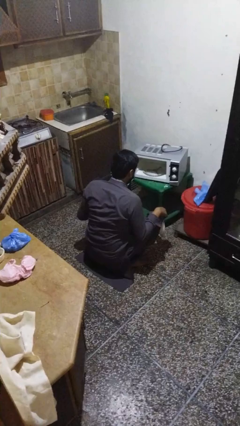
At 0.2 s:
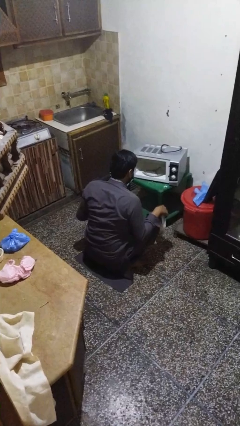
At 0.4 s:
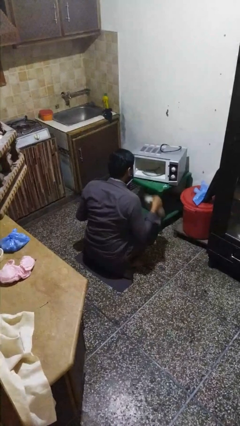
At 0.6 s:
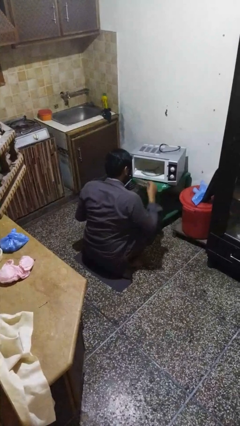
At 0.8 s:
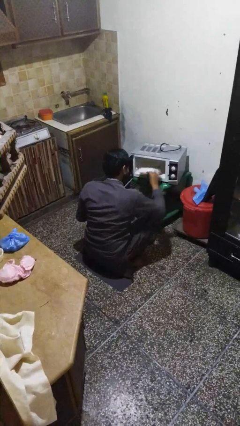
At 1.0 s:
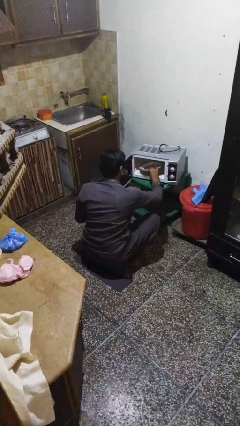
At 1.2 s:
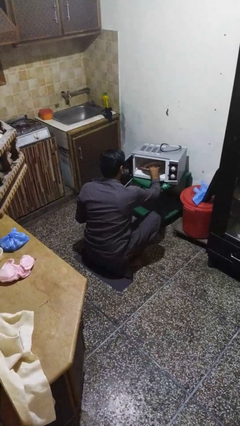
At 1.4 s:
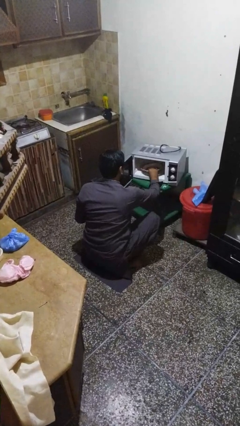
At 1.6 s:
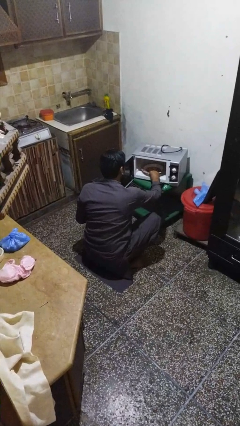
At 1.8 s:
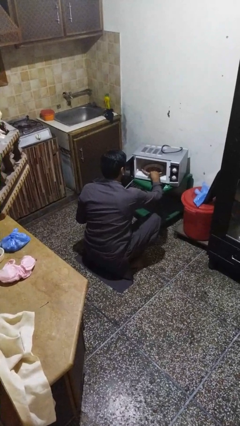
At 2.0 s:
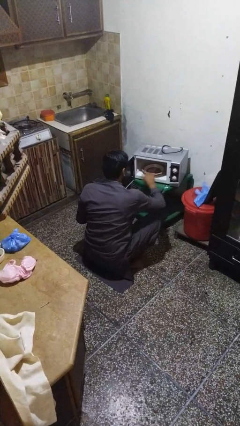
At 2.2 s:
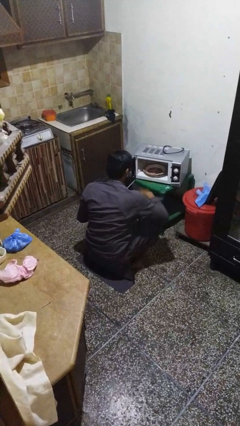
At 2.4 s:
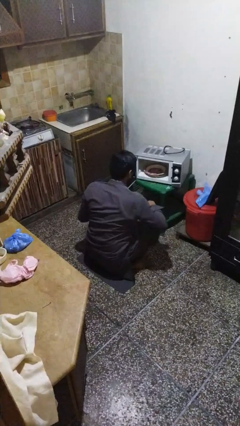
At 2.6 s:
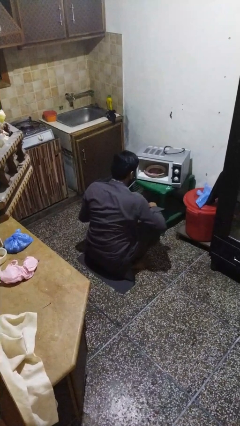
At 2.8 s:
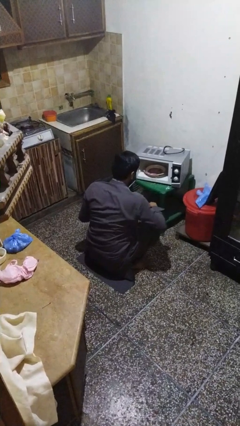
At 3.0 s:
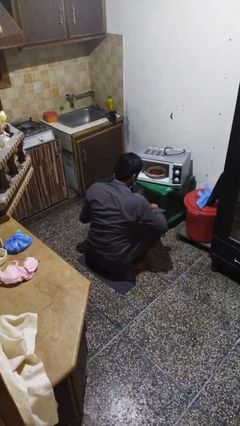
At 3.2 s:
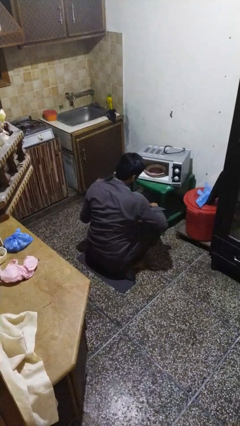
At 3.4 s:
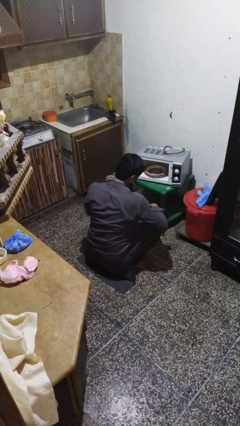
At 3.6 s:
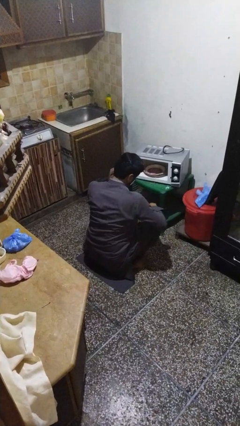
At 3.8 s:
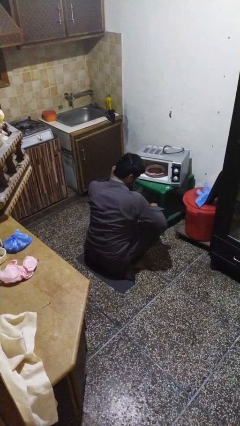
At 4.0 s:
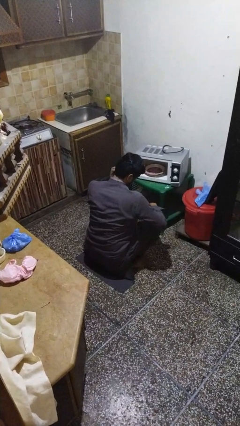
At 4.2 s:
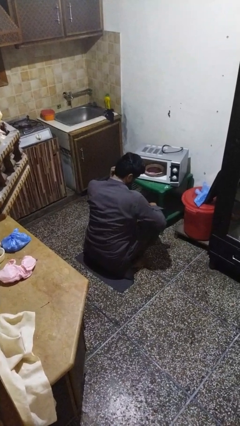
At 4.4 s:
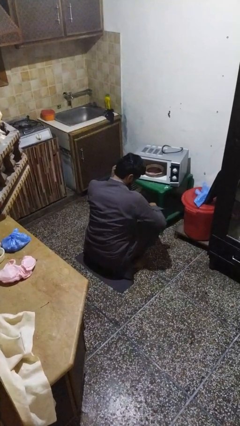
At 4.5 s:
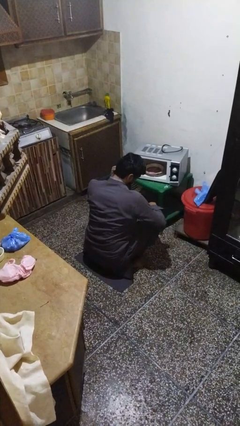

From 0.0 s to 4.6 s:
person puts object into microwave

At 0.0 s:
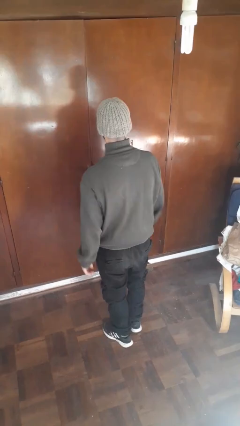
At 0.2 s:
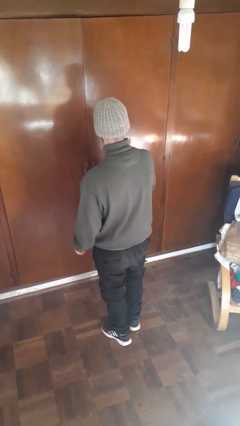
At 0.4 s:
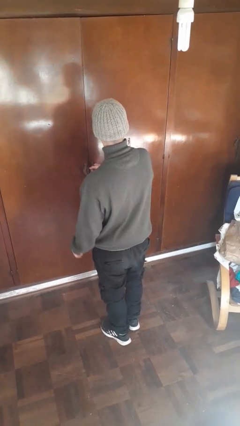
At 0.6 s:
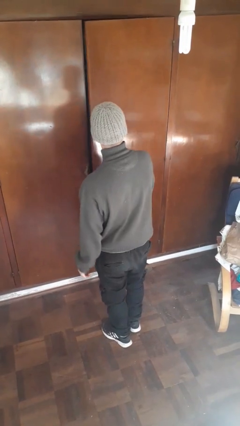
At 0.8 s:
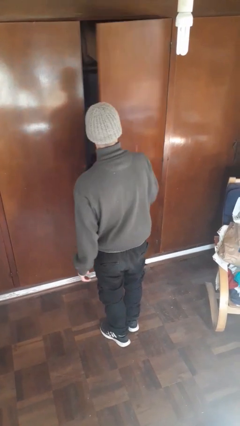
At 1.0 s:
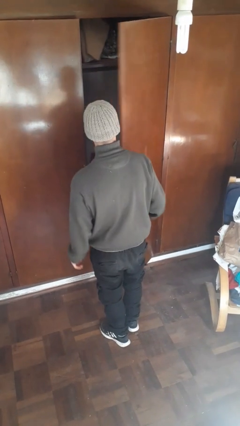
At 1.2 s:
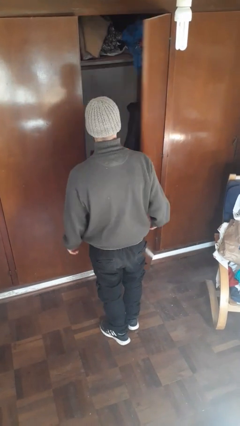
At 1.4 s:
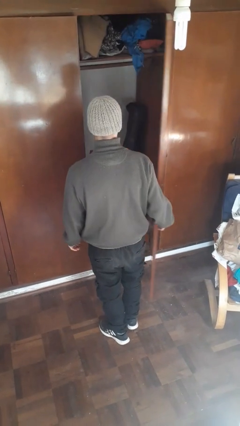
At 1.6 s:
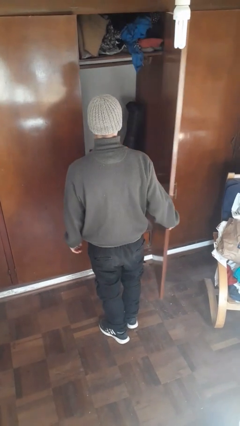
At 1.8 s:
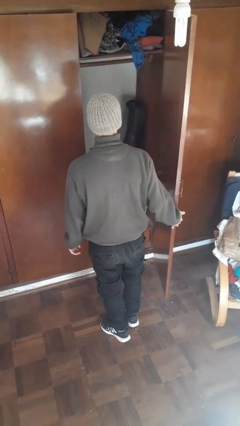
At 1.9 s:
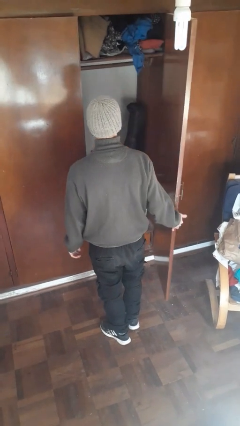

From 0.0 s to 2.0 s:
person opens closet door

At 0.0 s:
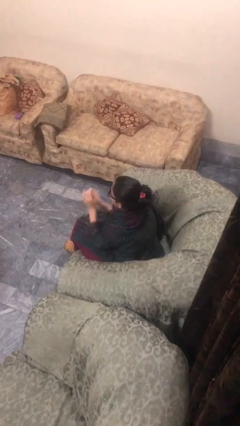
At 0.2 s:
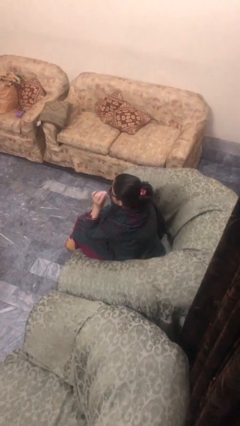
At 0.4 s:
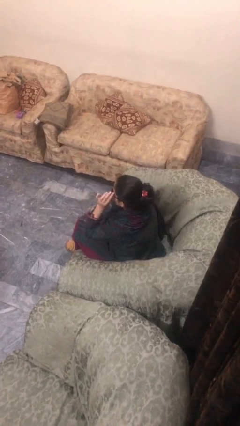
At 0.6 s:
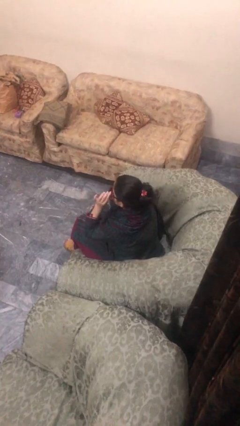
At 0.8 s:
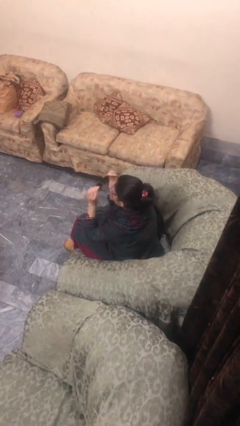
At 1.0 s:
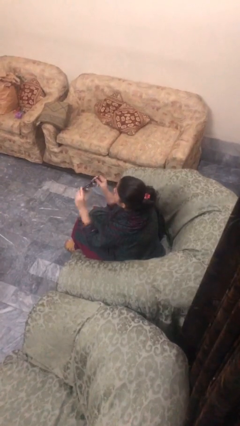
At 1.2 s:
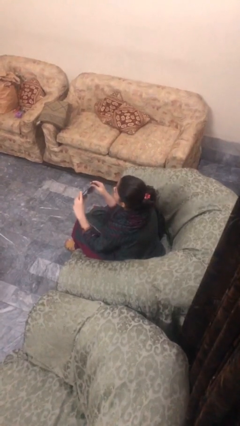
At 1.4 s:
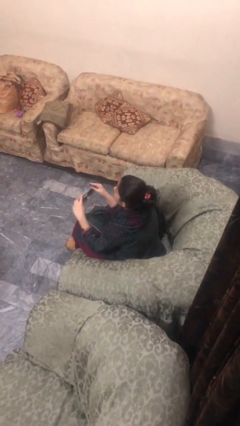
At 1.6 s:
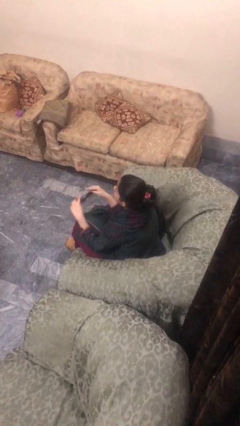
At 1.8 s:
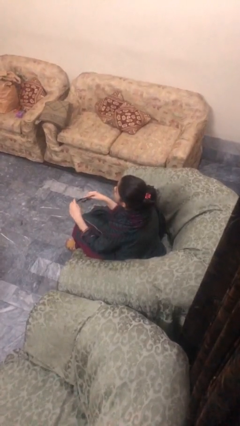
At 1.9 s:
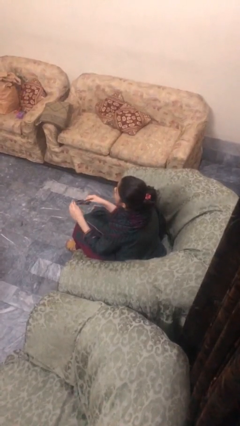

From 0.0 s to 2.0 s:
person takes off sunglasses

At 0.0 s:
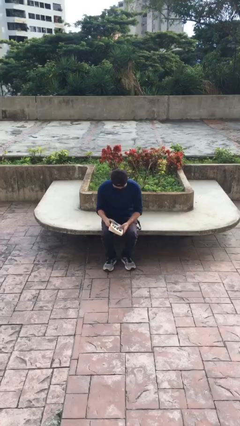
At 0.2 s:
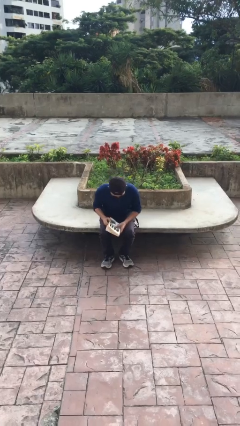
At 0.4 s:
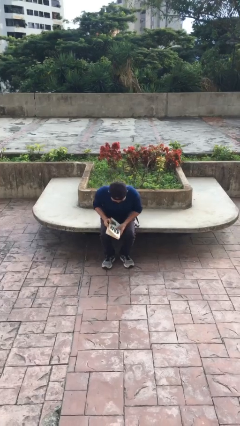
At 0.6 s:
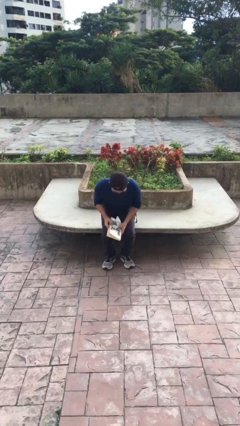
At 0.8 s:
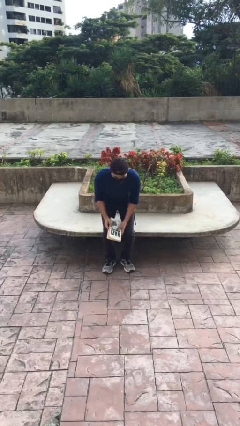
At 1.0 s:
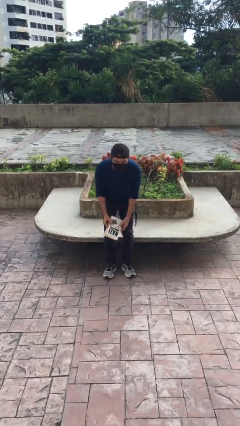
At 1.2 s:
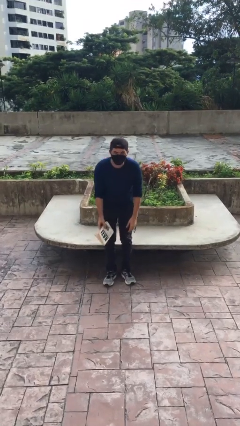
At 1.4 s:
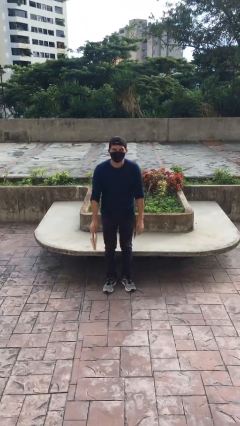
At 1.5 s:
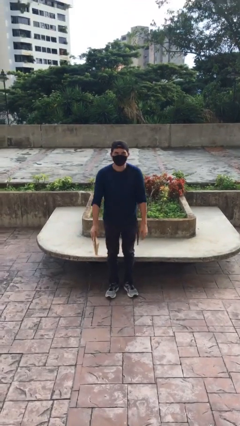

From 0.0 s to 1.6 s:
person stands up

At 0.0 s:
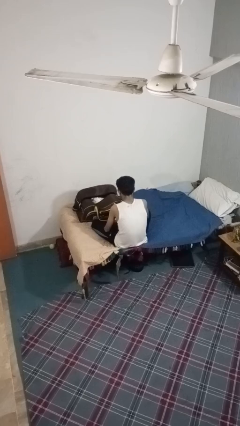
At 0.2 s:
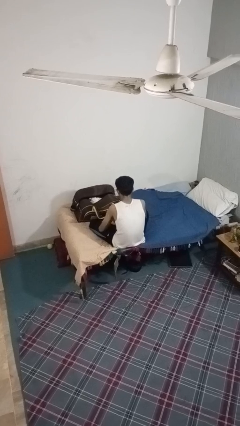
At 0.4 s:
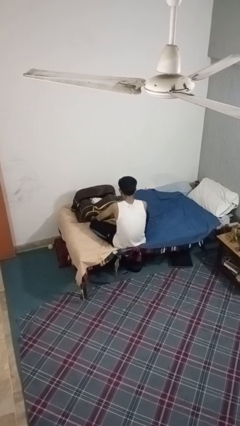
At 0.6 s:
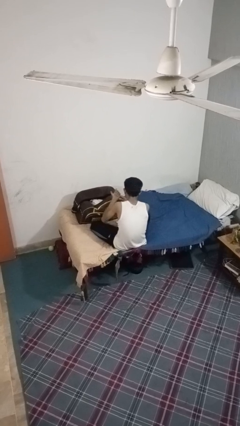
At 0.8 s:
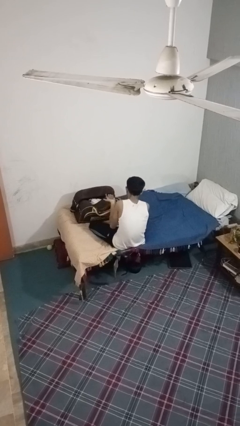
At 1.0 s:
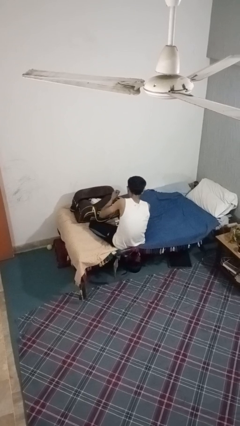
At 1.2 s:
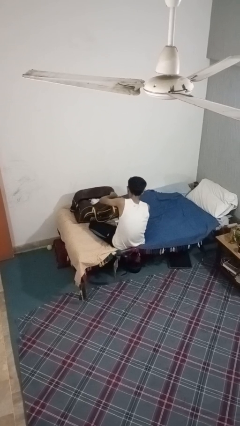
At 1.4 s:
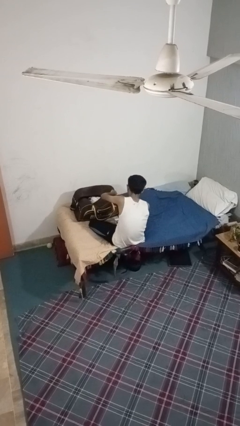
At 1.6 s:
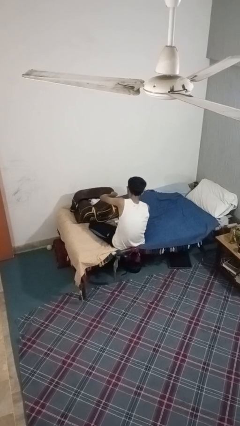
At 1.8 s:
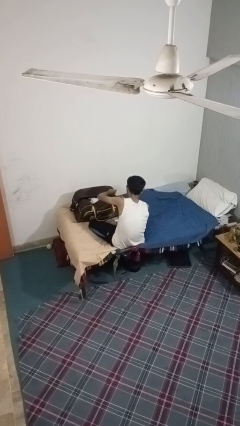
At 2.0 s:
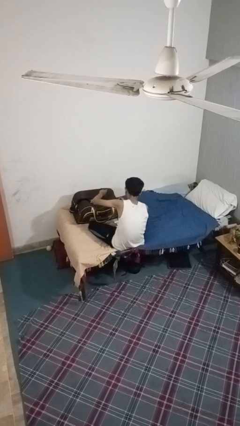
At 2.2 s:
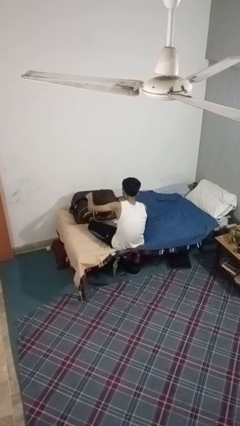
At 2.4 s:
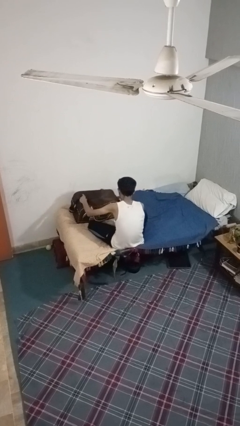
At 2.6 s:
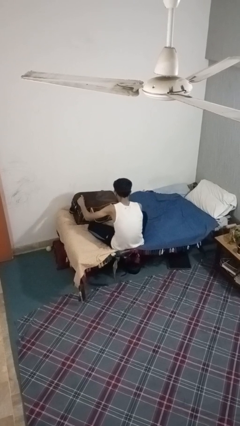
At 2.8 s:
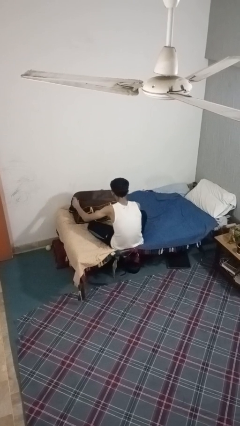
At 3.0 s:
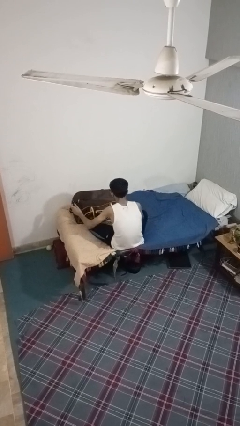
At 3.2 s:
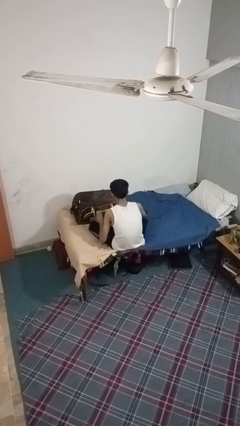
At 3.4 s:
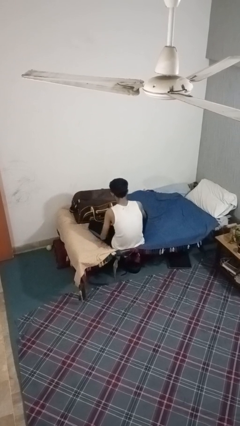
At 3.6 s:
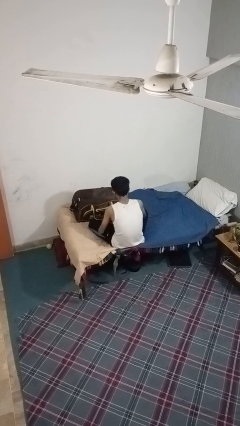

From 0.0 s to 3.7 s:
person closes suitcase

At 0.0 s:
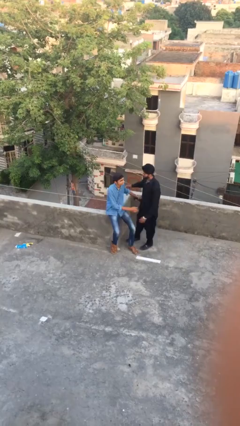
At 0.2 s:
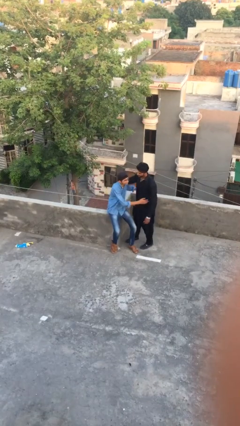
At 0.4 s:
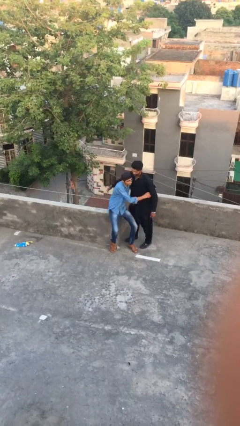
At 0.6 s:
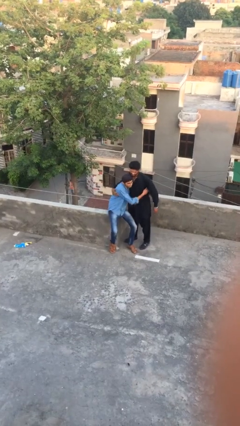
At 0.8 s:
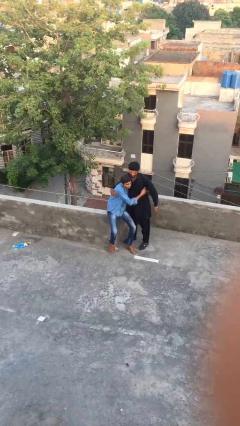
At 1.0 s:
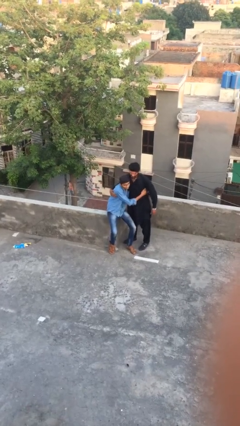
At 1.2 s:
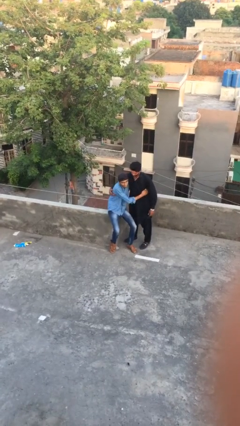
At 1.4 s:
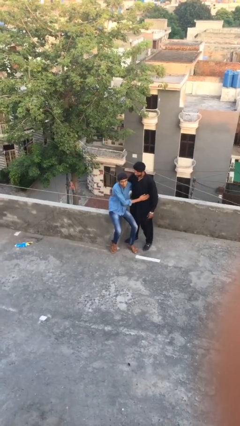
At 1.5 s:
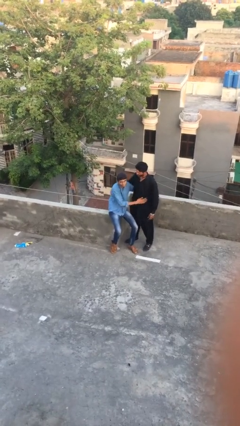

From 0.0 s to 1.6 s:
person embraces person

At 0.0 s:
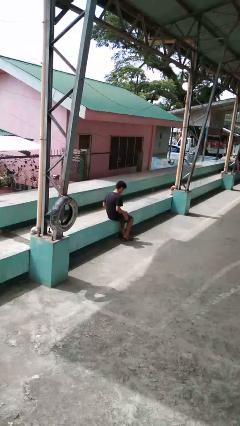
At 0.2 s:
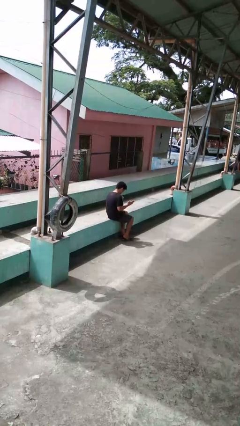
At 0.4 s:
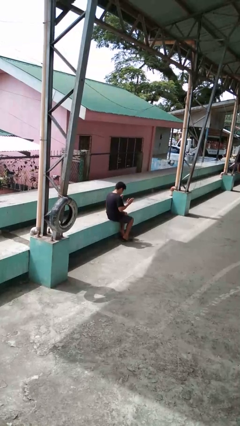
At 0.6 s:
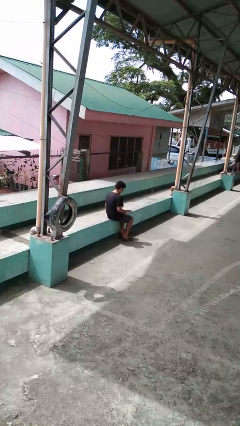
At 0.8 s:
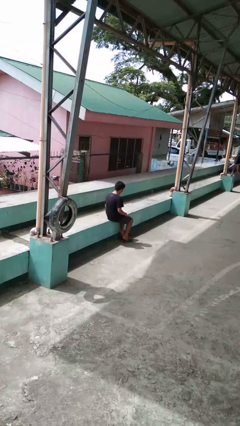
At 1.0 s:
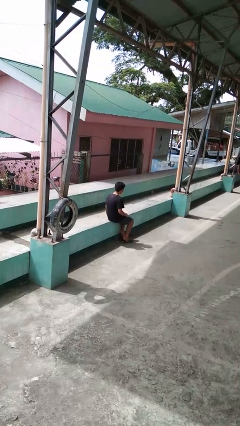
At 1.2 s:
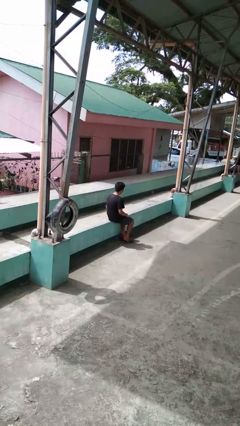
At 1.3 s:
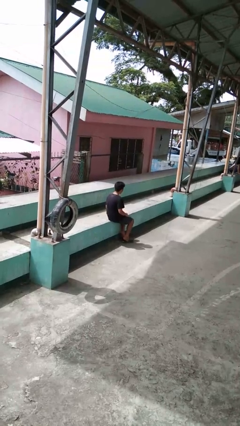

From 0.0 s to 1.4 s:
person slaps hands on thighs
